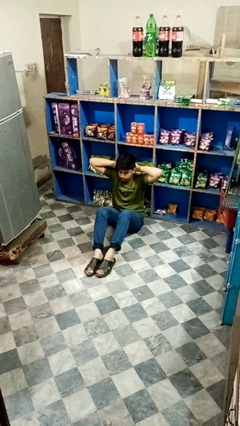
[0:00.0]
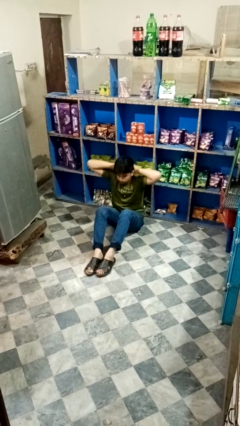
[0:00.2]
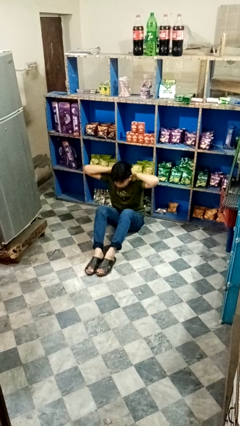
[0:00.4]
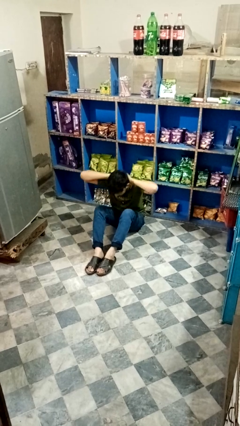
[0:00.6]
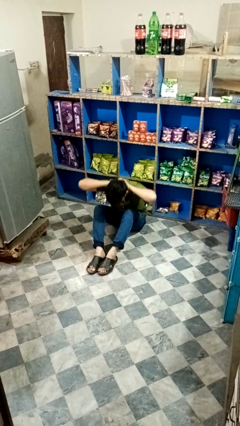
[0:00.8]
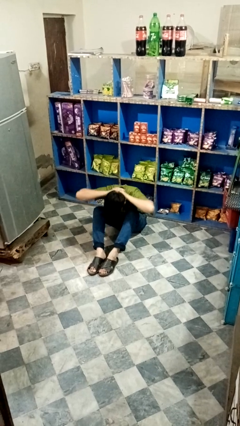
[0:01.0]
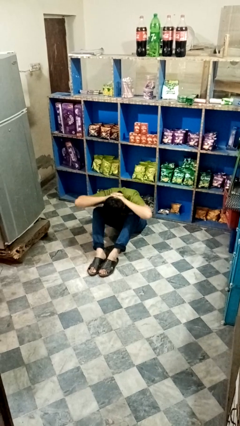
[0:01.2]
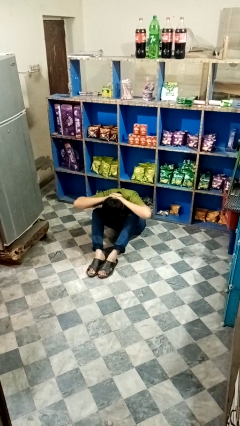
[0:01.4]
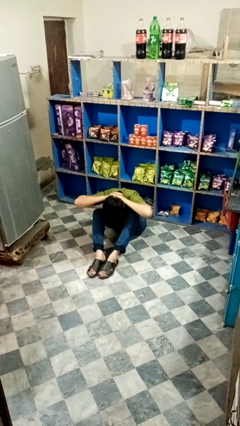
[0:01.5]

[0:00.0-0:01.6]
person exercises with situp

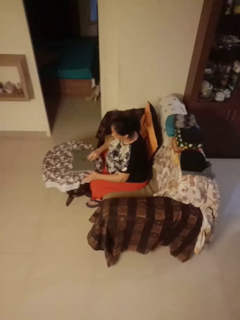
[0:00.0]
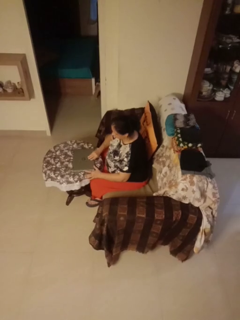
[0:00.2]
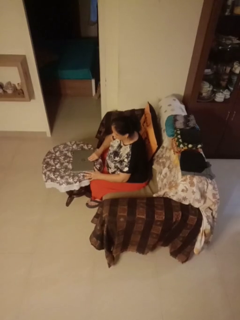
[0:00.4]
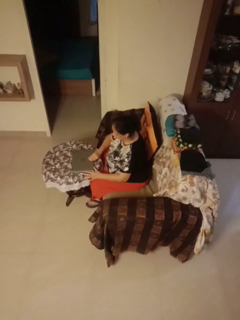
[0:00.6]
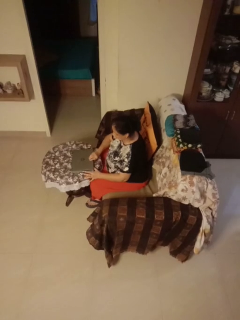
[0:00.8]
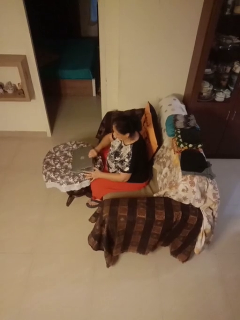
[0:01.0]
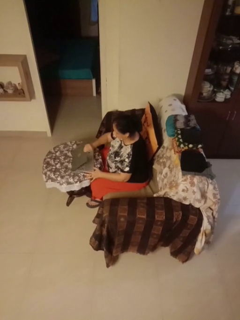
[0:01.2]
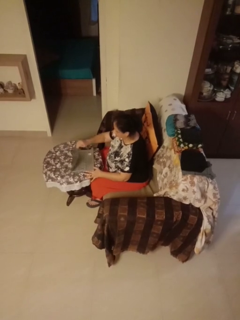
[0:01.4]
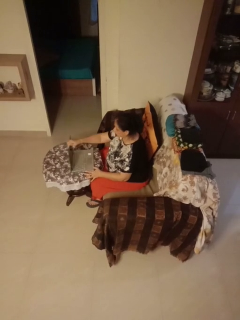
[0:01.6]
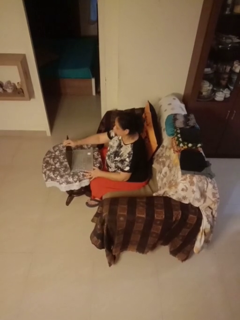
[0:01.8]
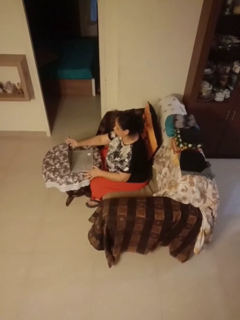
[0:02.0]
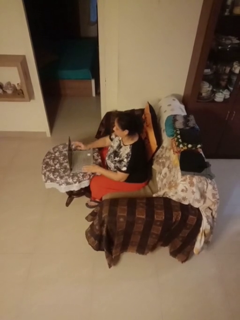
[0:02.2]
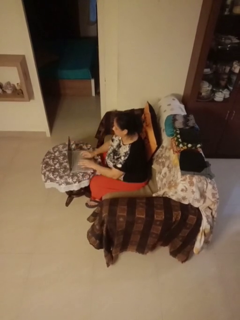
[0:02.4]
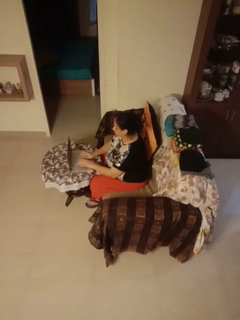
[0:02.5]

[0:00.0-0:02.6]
person opens laptop

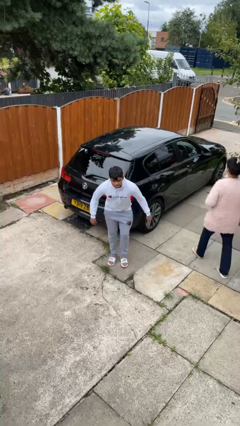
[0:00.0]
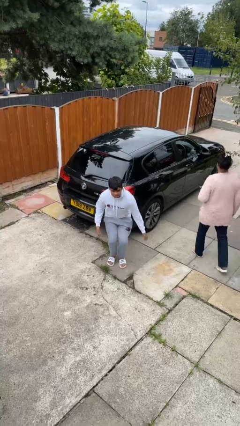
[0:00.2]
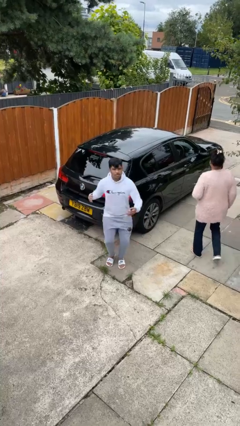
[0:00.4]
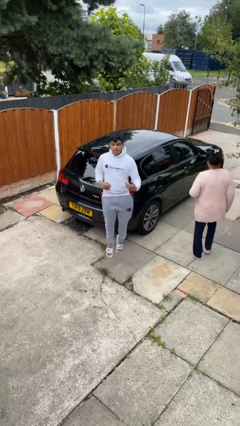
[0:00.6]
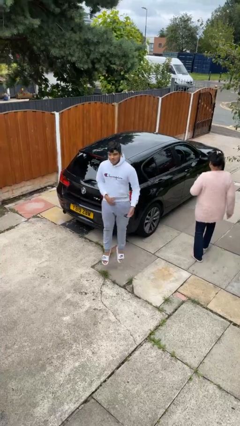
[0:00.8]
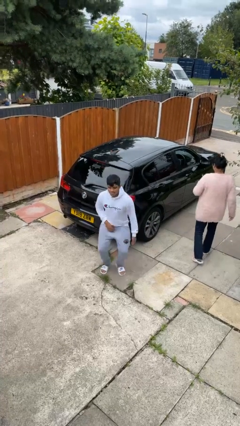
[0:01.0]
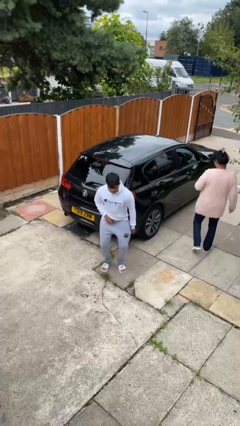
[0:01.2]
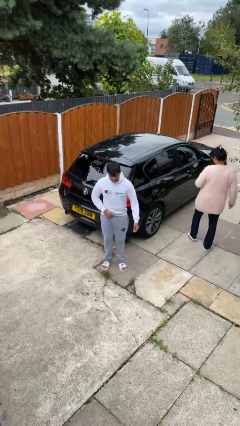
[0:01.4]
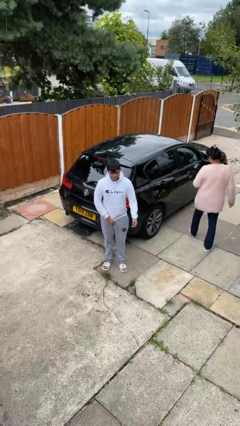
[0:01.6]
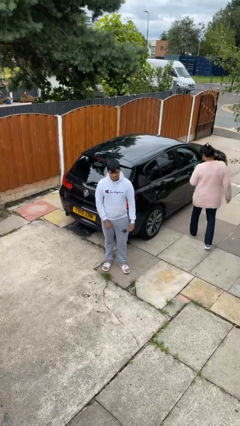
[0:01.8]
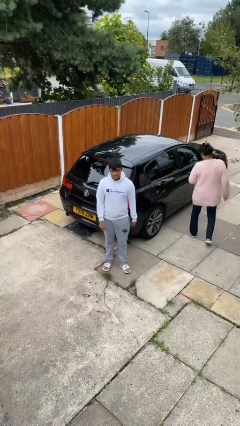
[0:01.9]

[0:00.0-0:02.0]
person jumps

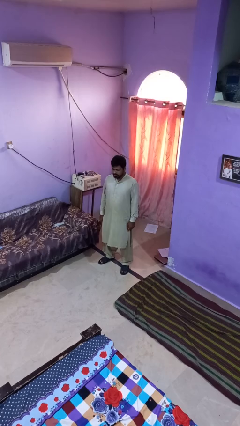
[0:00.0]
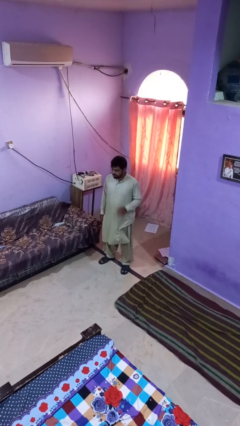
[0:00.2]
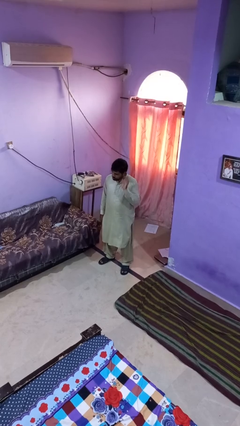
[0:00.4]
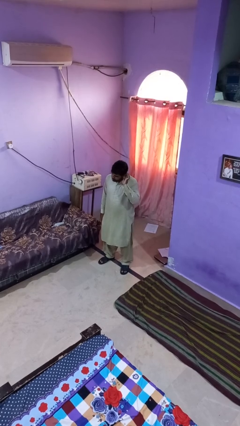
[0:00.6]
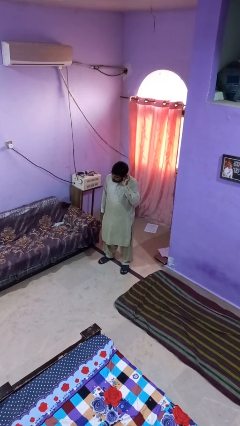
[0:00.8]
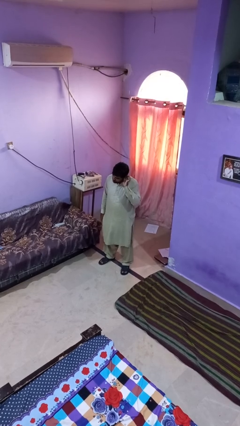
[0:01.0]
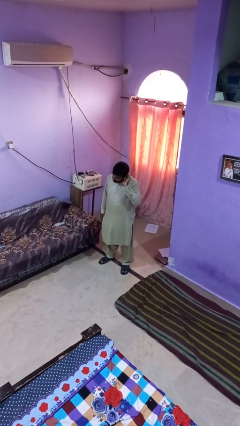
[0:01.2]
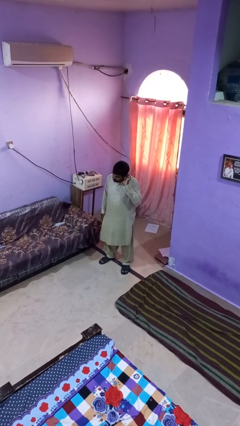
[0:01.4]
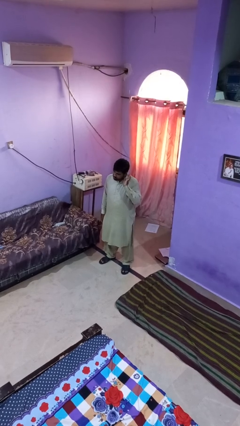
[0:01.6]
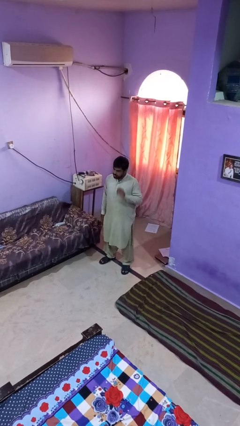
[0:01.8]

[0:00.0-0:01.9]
person gestures listen closely

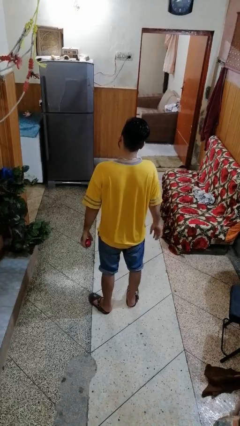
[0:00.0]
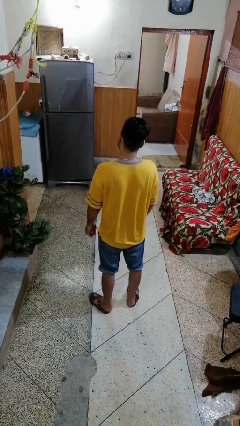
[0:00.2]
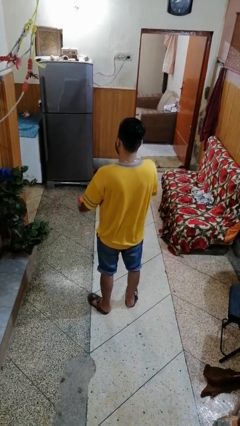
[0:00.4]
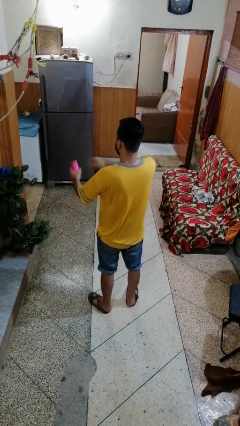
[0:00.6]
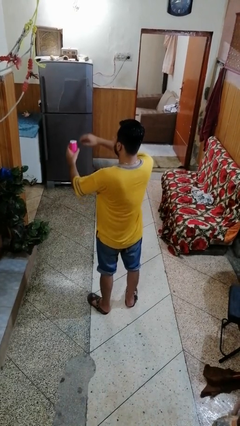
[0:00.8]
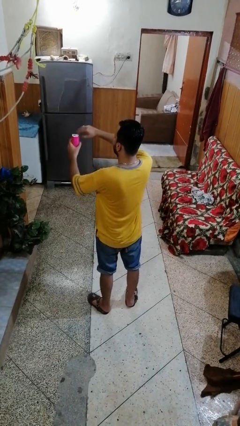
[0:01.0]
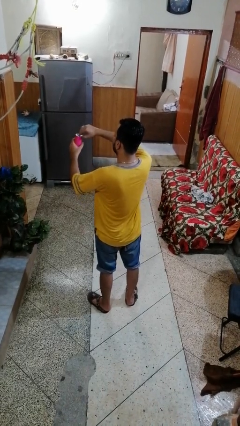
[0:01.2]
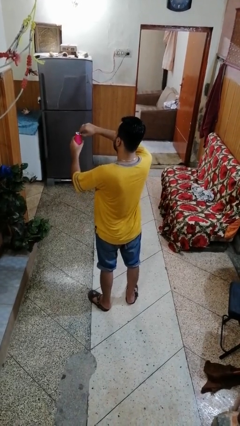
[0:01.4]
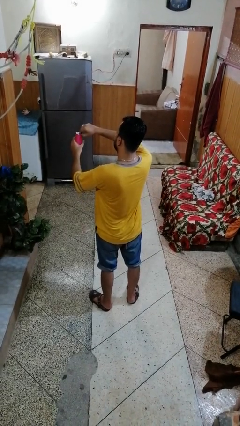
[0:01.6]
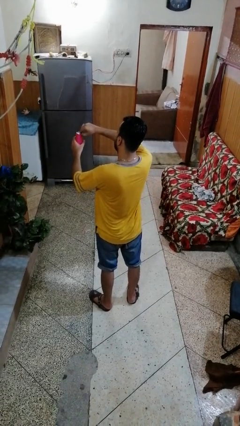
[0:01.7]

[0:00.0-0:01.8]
person opens beverage can

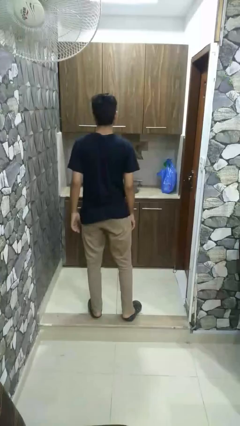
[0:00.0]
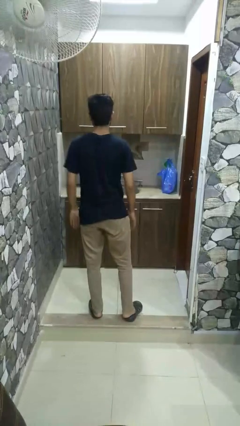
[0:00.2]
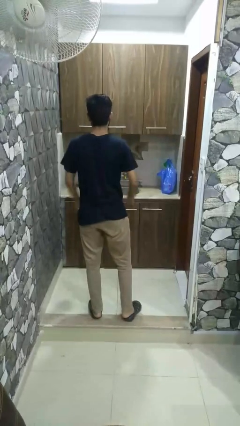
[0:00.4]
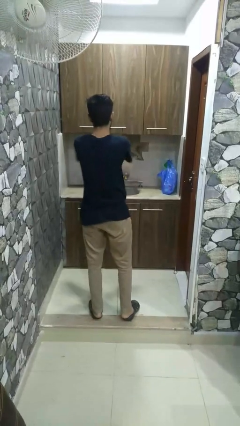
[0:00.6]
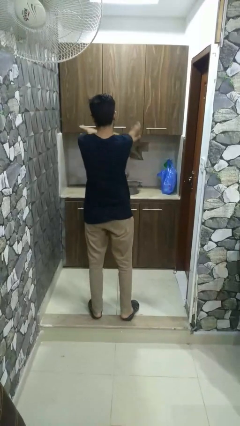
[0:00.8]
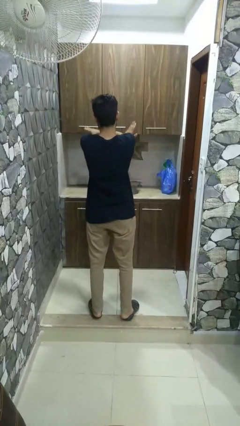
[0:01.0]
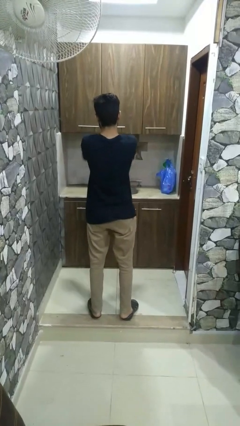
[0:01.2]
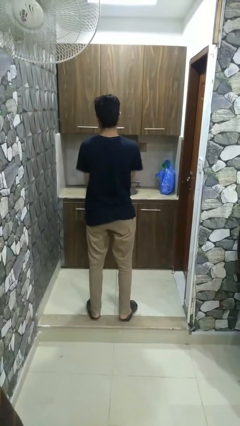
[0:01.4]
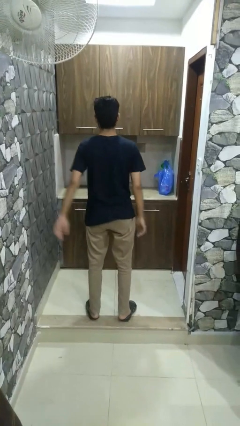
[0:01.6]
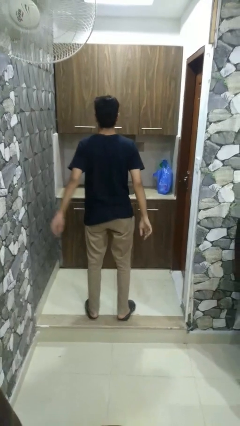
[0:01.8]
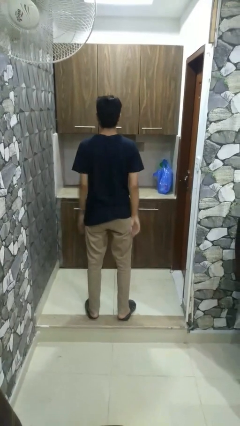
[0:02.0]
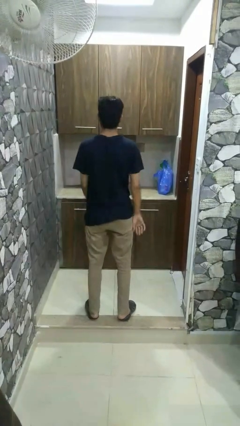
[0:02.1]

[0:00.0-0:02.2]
person crosses arms

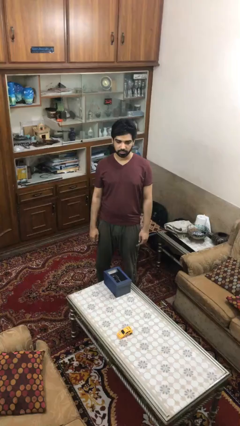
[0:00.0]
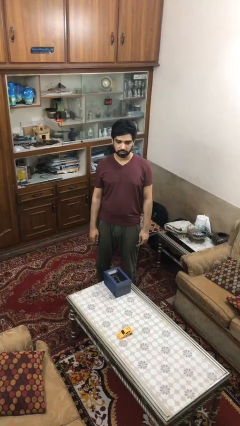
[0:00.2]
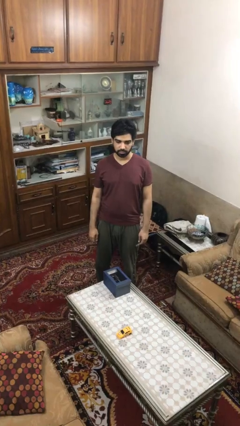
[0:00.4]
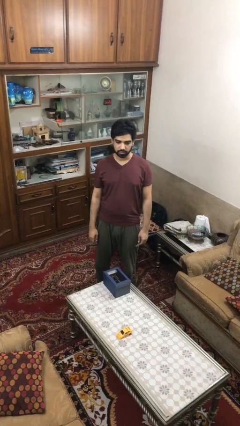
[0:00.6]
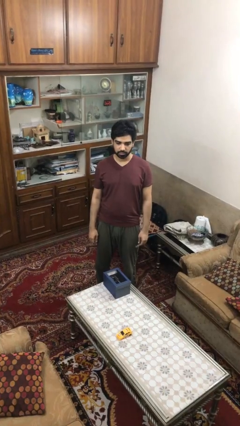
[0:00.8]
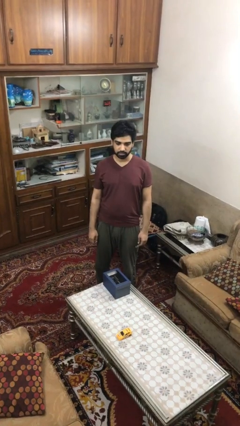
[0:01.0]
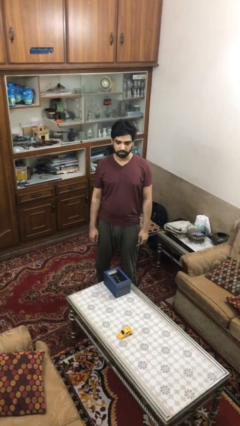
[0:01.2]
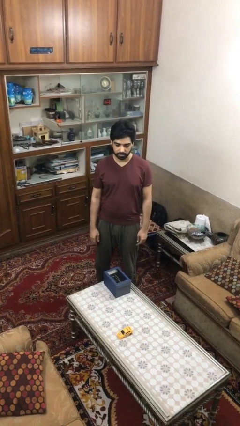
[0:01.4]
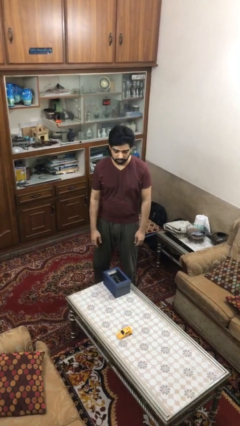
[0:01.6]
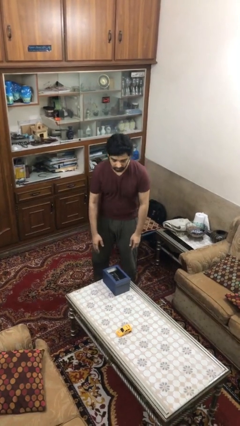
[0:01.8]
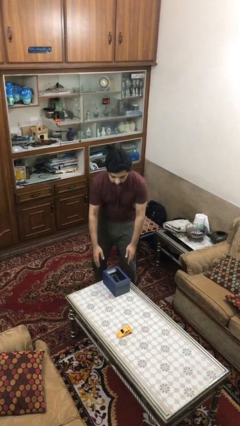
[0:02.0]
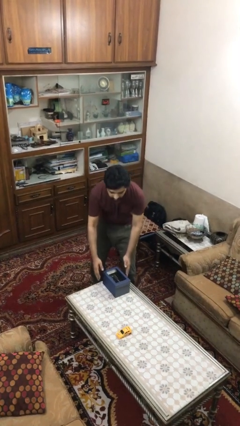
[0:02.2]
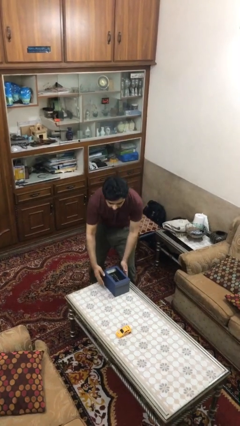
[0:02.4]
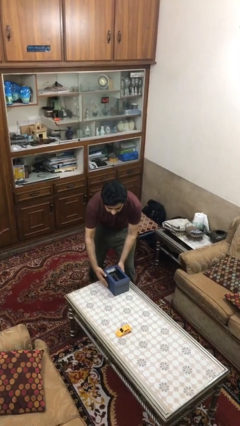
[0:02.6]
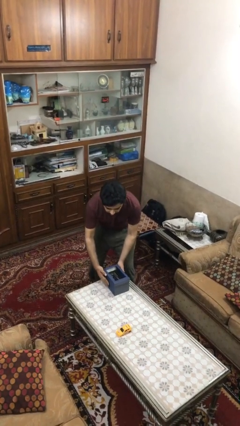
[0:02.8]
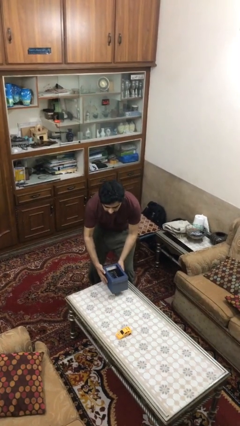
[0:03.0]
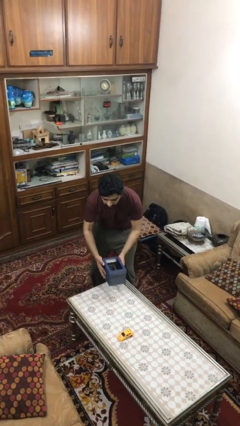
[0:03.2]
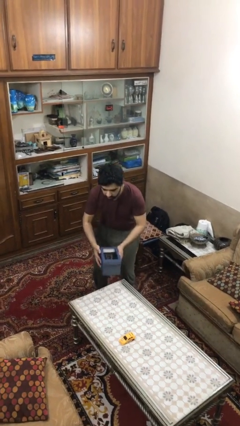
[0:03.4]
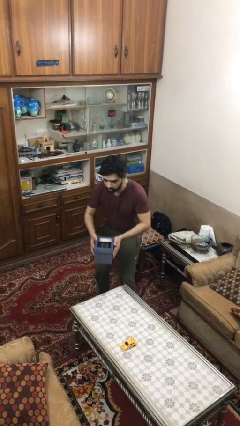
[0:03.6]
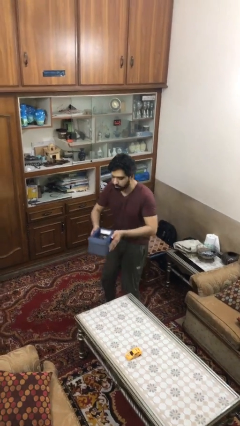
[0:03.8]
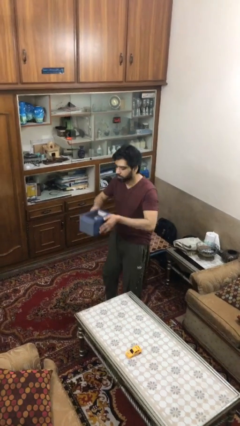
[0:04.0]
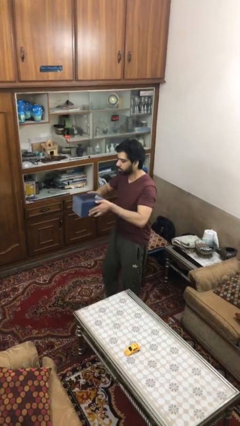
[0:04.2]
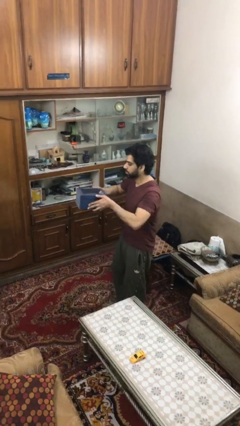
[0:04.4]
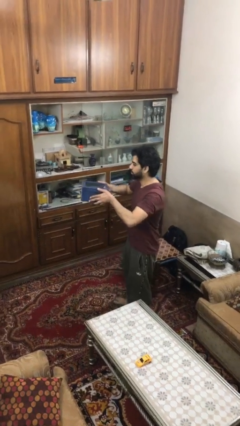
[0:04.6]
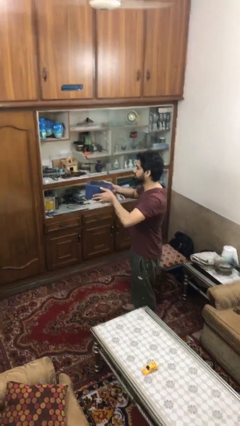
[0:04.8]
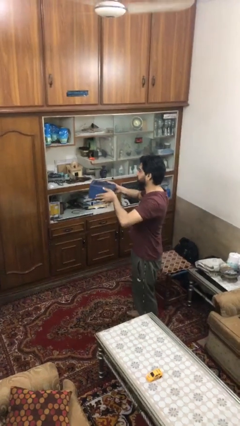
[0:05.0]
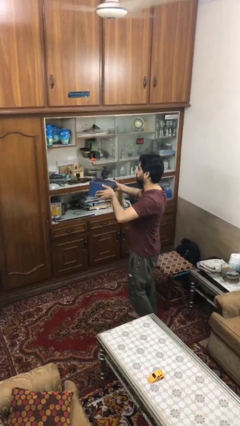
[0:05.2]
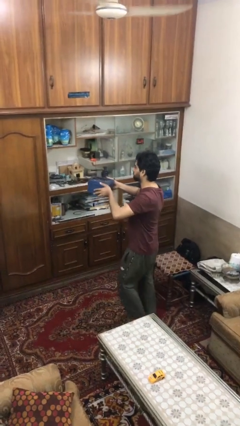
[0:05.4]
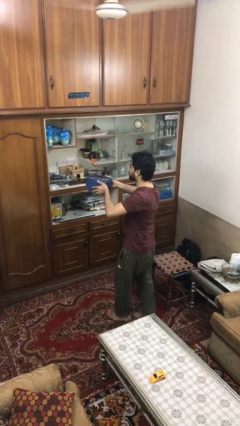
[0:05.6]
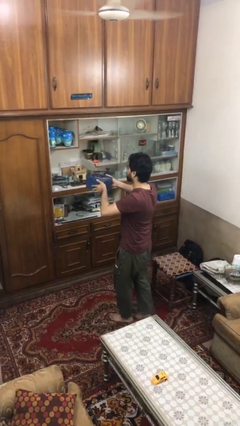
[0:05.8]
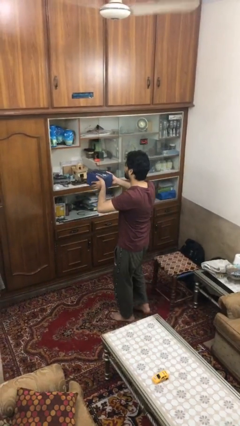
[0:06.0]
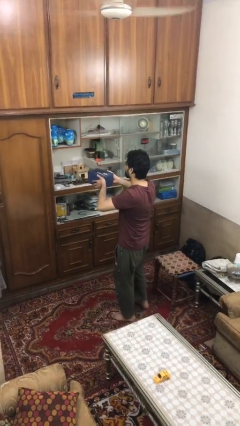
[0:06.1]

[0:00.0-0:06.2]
person picks up object from table
